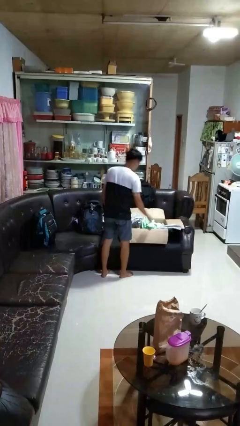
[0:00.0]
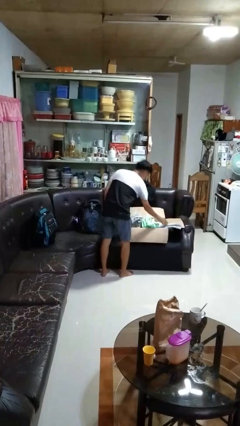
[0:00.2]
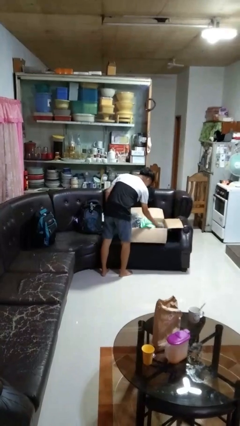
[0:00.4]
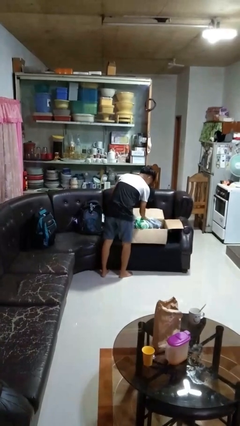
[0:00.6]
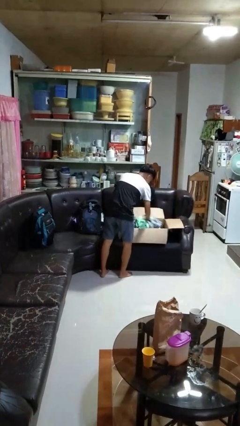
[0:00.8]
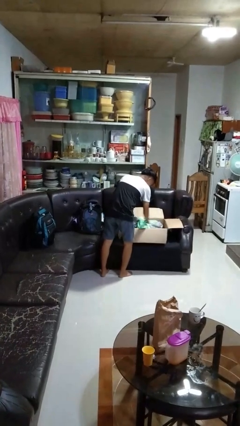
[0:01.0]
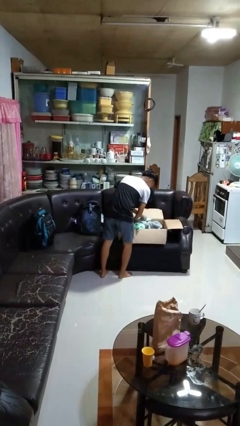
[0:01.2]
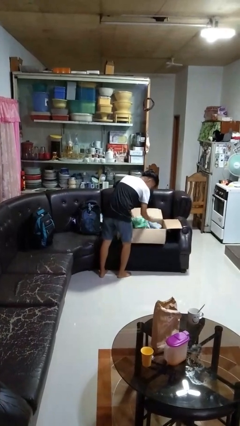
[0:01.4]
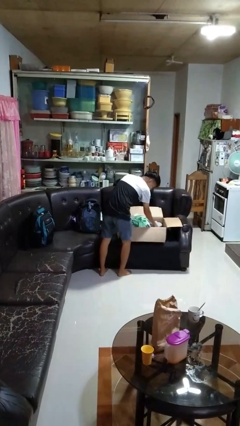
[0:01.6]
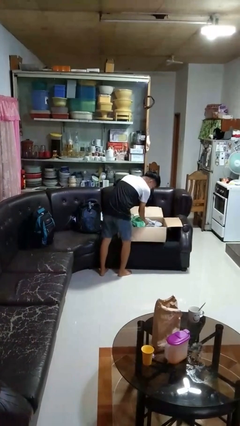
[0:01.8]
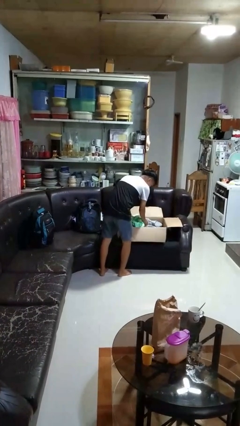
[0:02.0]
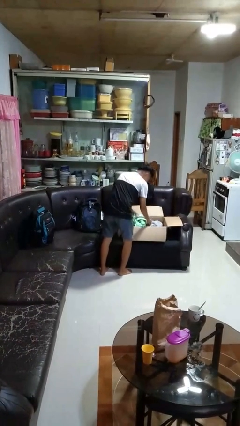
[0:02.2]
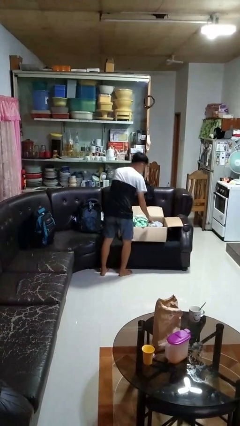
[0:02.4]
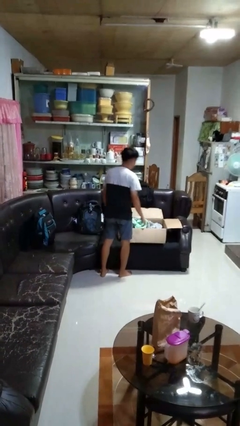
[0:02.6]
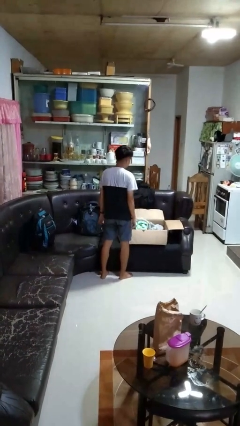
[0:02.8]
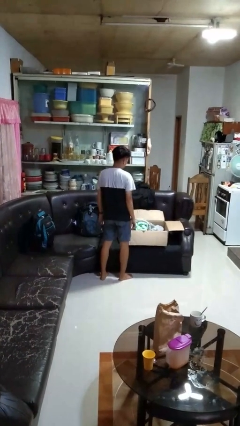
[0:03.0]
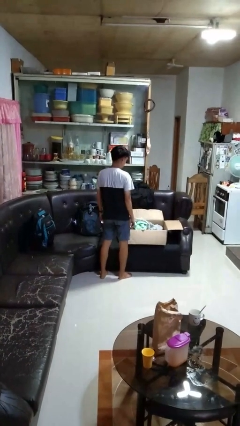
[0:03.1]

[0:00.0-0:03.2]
person searches in box

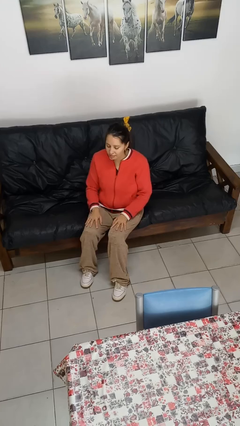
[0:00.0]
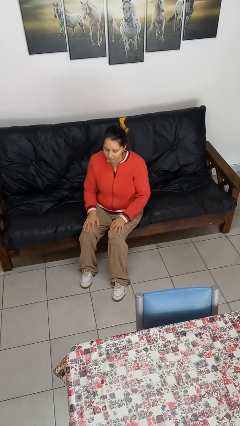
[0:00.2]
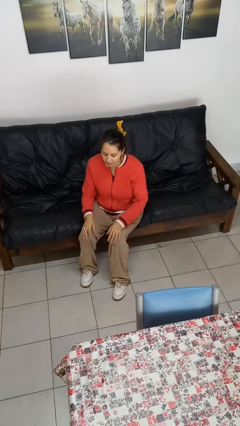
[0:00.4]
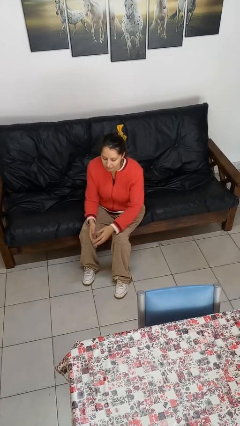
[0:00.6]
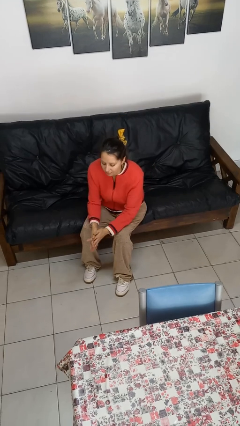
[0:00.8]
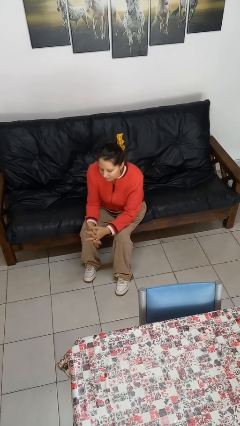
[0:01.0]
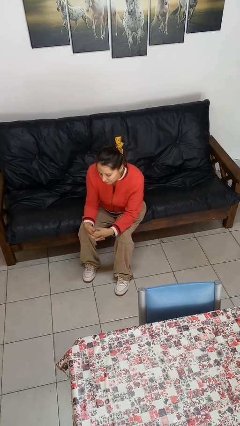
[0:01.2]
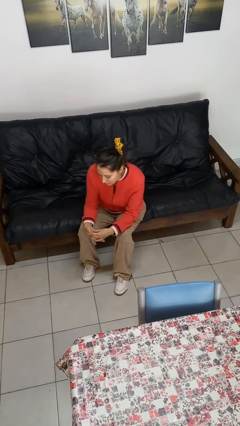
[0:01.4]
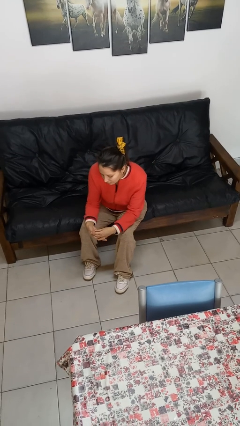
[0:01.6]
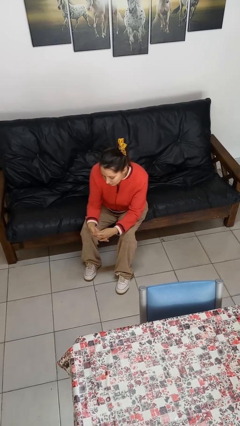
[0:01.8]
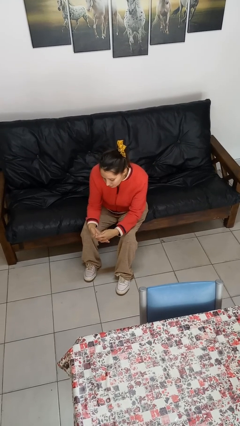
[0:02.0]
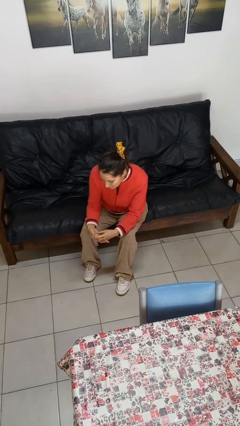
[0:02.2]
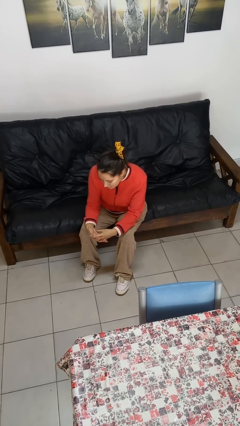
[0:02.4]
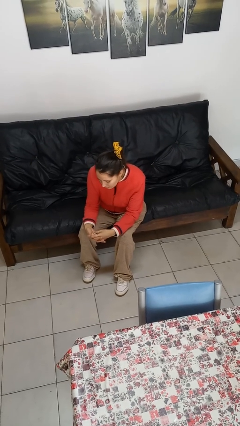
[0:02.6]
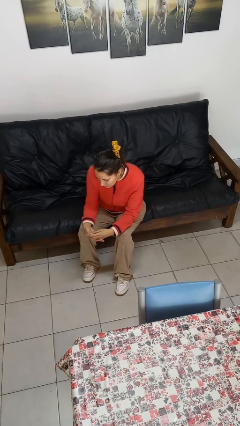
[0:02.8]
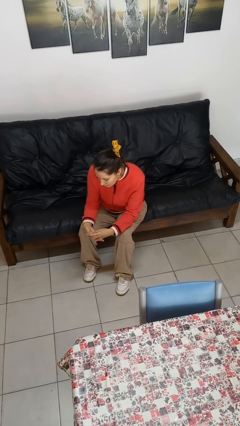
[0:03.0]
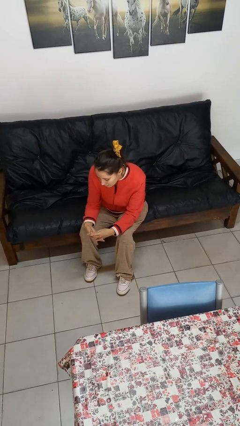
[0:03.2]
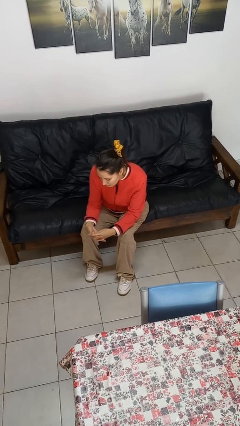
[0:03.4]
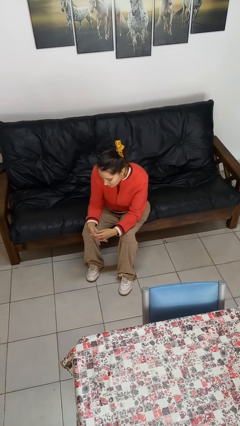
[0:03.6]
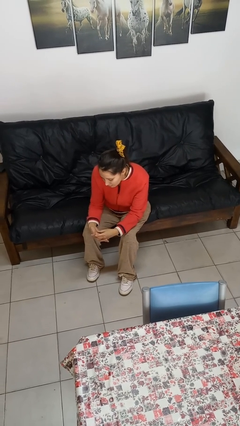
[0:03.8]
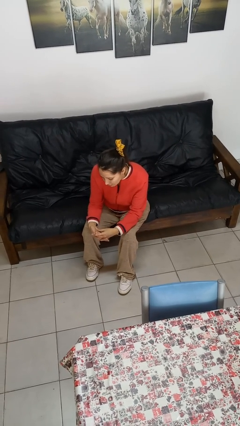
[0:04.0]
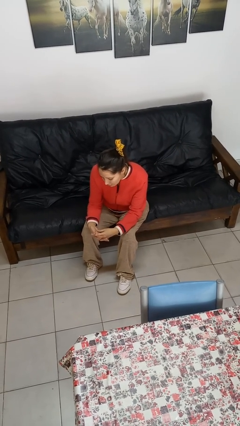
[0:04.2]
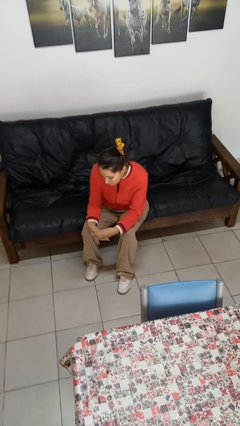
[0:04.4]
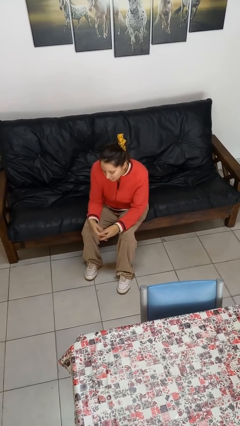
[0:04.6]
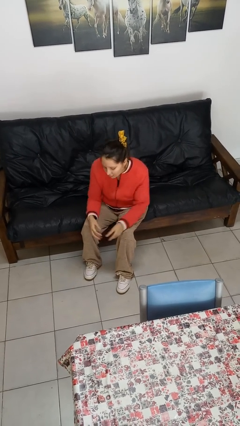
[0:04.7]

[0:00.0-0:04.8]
person looks at hands in lap

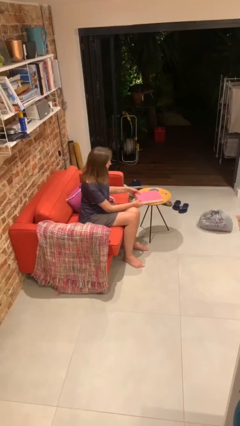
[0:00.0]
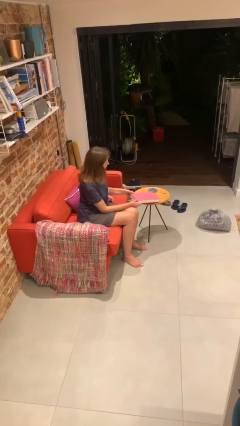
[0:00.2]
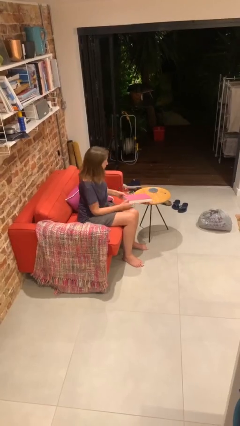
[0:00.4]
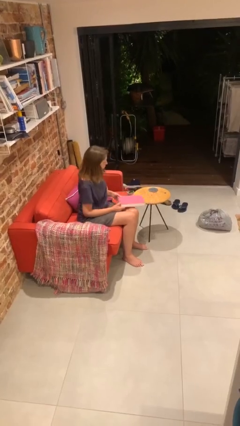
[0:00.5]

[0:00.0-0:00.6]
person picks up object from table

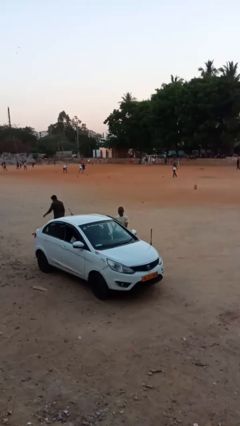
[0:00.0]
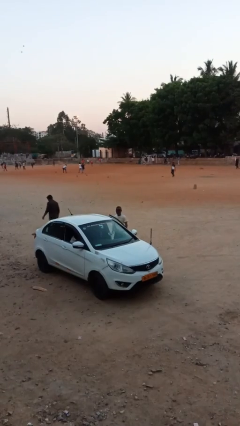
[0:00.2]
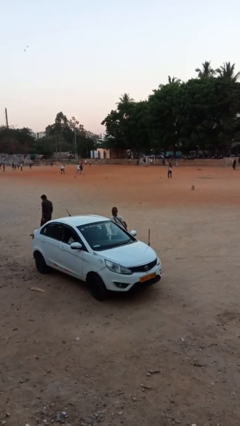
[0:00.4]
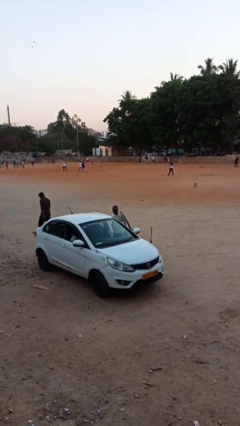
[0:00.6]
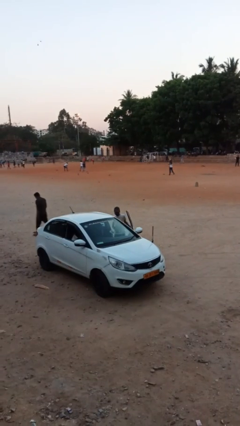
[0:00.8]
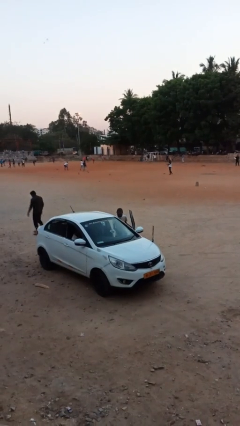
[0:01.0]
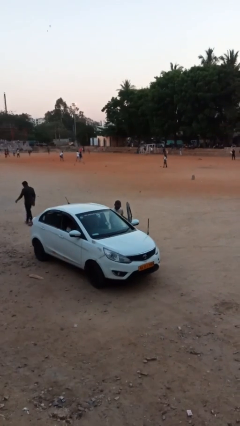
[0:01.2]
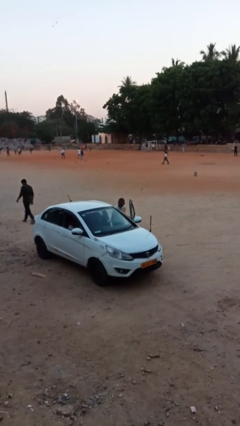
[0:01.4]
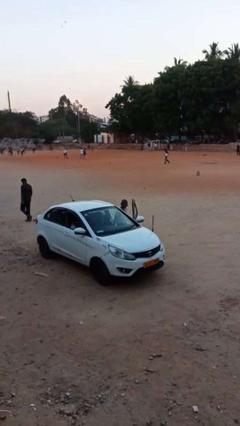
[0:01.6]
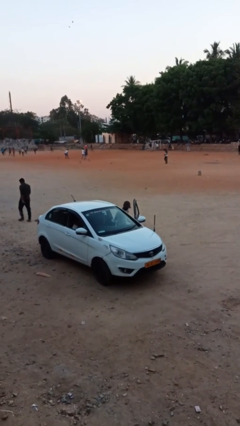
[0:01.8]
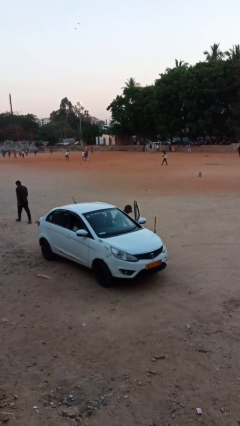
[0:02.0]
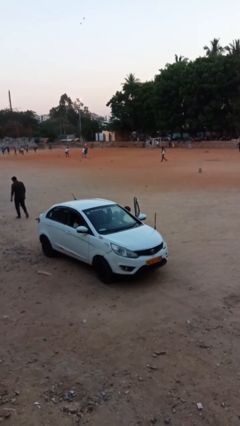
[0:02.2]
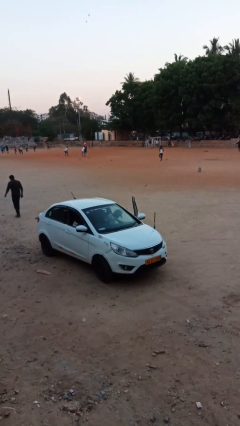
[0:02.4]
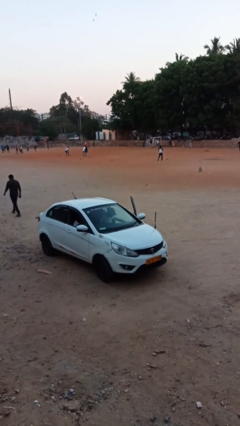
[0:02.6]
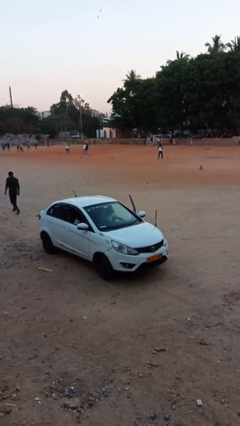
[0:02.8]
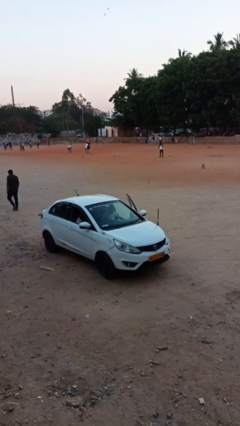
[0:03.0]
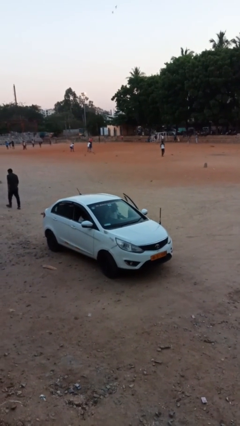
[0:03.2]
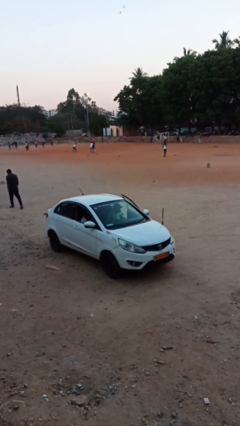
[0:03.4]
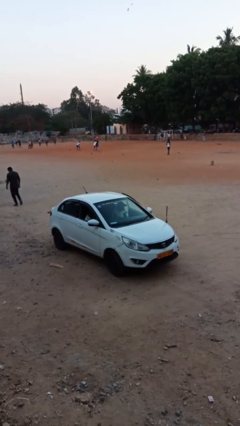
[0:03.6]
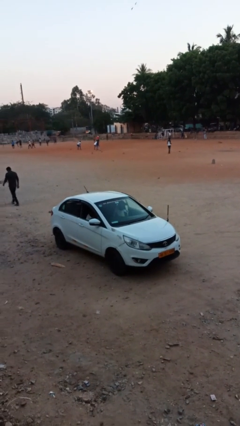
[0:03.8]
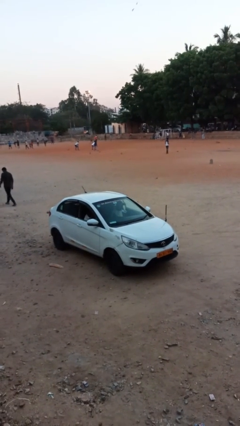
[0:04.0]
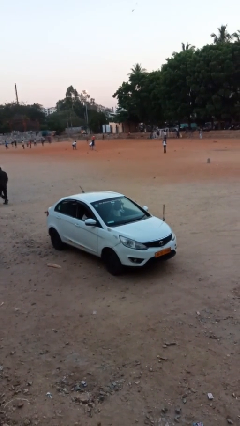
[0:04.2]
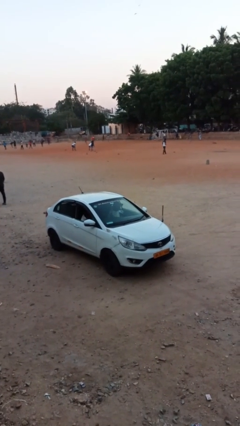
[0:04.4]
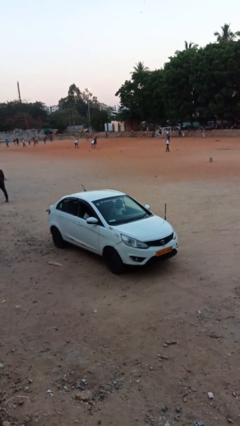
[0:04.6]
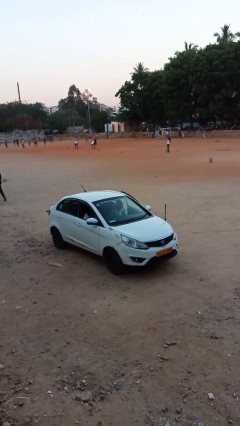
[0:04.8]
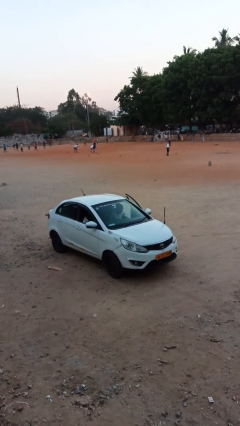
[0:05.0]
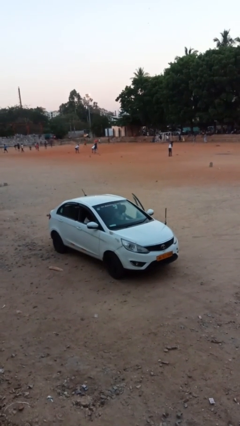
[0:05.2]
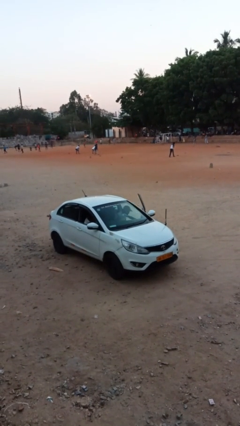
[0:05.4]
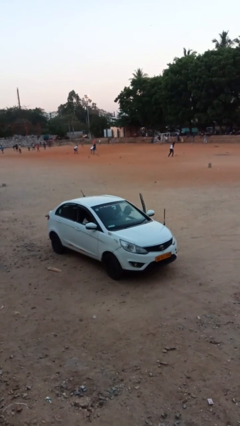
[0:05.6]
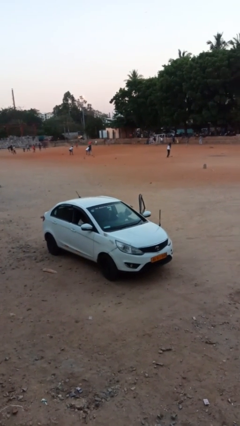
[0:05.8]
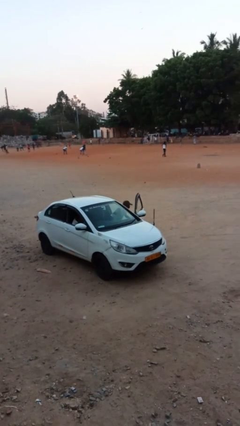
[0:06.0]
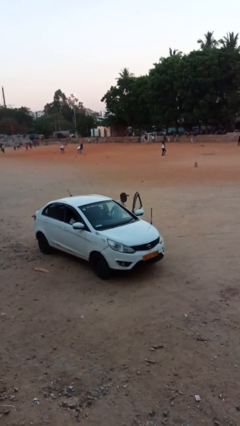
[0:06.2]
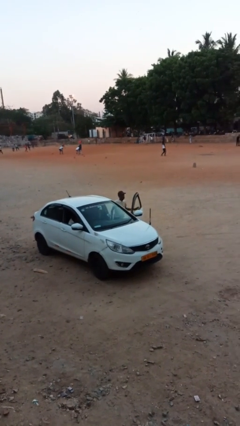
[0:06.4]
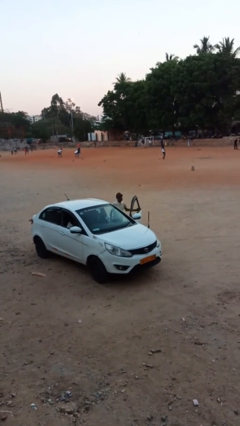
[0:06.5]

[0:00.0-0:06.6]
person enters car

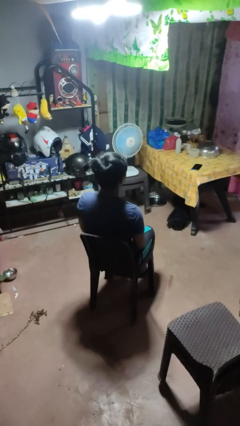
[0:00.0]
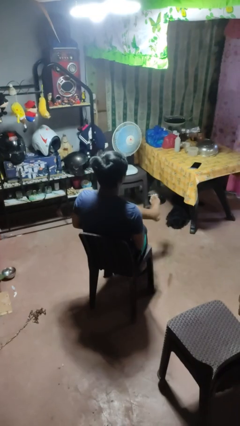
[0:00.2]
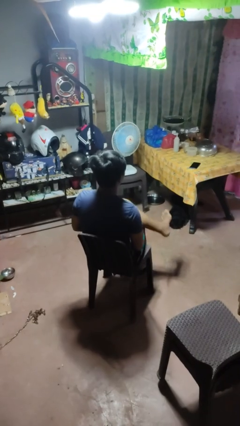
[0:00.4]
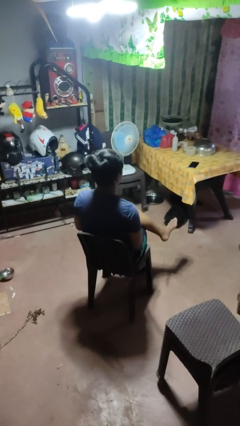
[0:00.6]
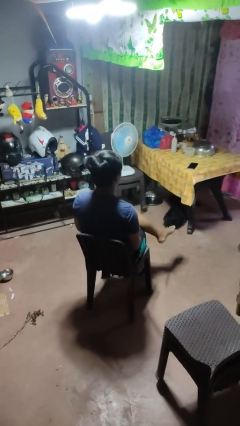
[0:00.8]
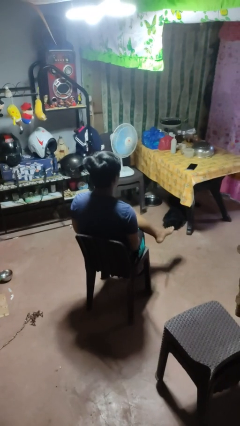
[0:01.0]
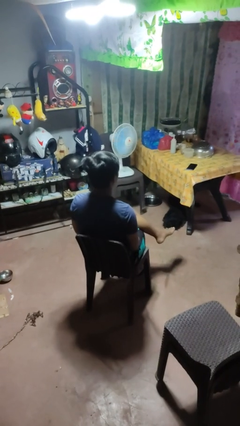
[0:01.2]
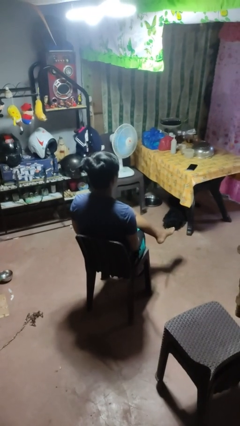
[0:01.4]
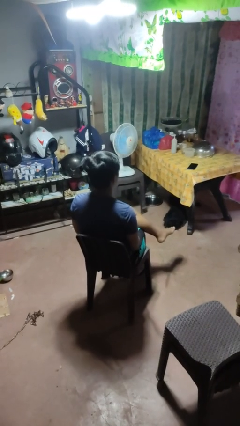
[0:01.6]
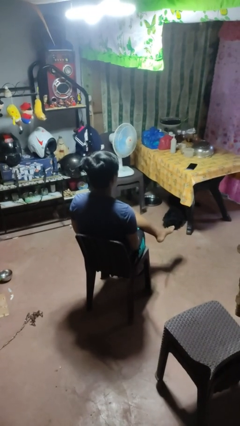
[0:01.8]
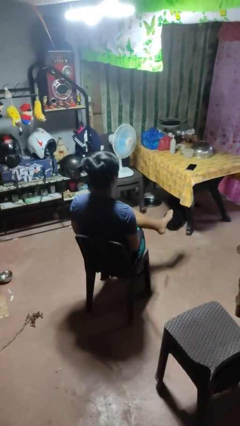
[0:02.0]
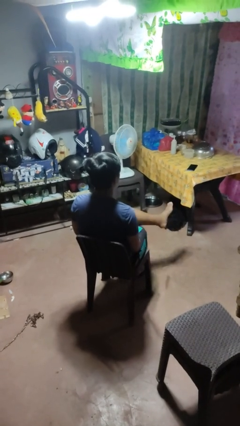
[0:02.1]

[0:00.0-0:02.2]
person crosses legs

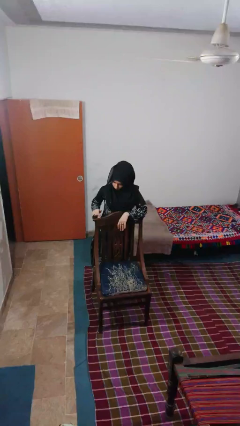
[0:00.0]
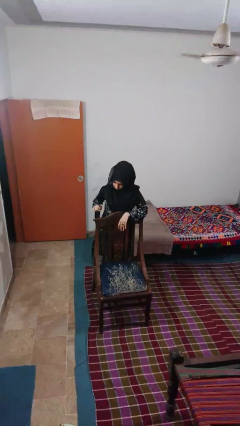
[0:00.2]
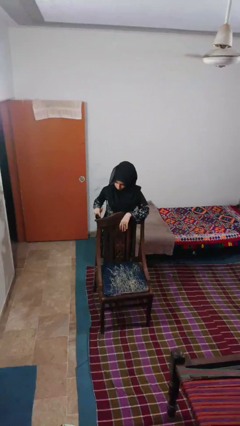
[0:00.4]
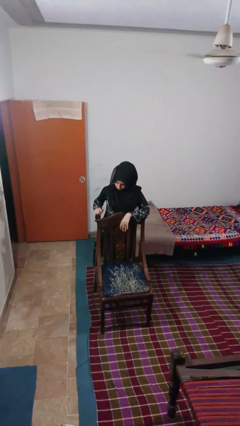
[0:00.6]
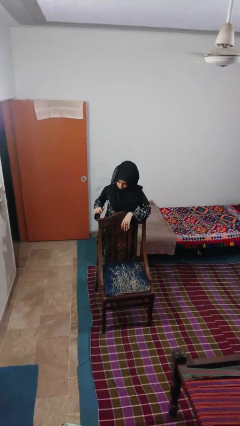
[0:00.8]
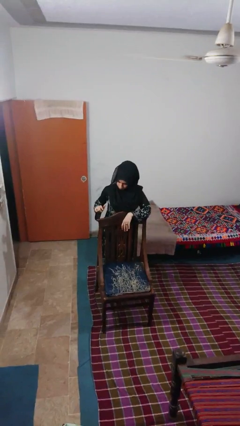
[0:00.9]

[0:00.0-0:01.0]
person taps object with finger
